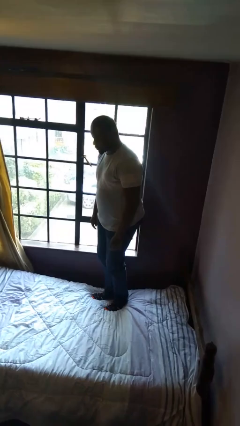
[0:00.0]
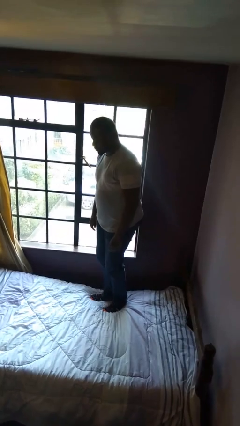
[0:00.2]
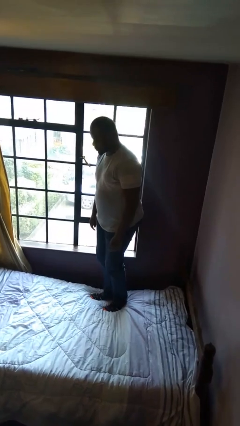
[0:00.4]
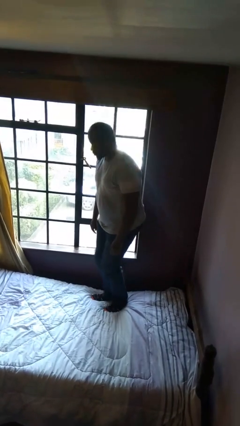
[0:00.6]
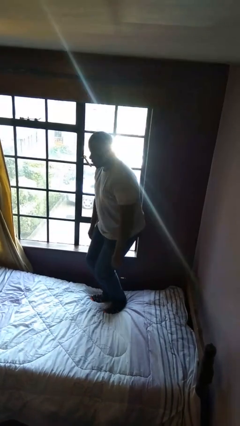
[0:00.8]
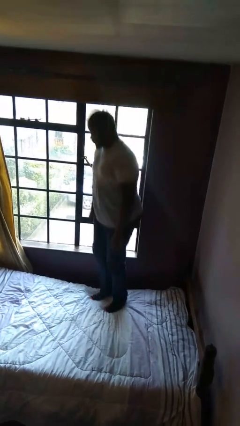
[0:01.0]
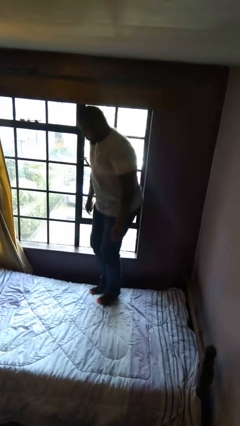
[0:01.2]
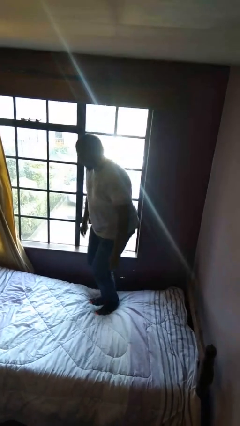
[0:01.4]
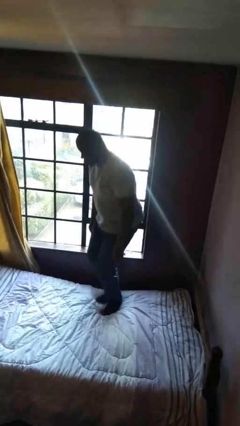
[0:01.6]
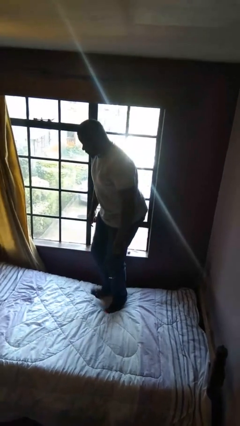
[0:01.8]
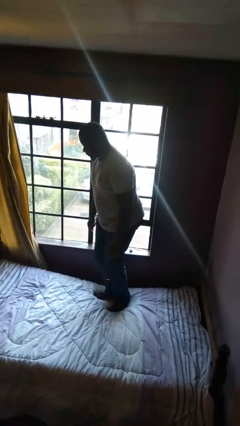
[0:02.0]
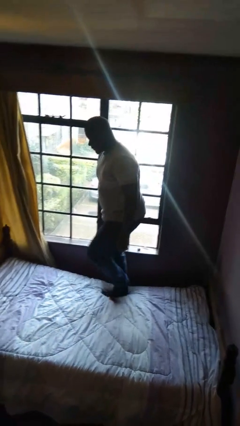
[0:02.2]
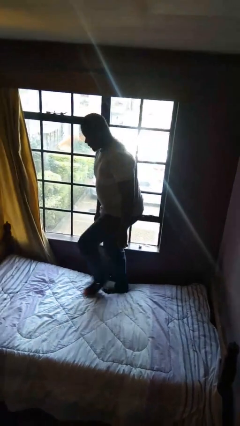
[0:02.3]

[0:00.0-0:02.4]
person jumps on bed

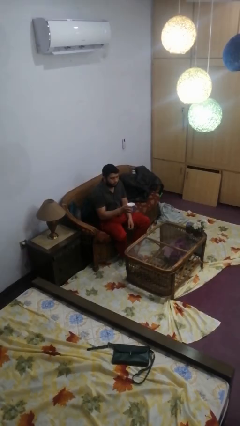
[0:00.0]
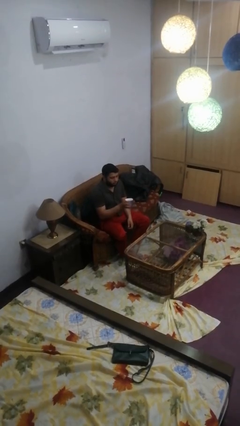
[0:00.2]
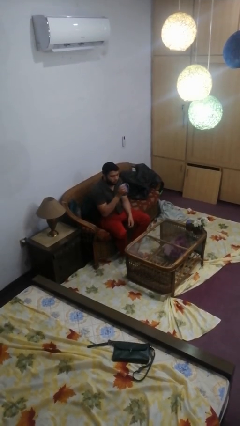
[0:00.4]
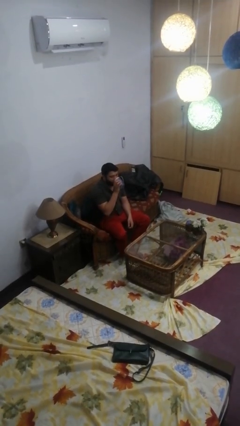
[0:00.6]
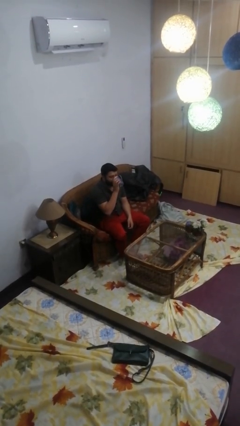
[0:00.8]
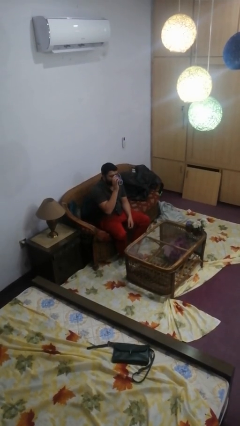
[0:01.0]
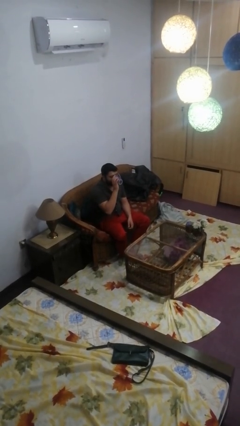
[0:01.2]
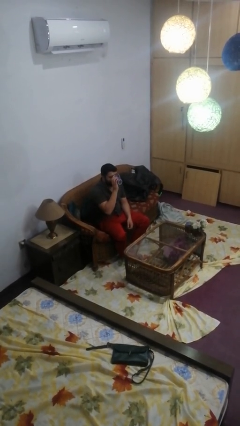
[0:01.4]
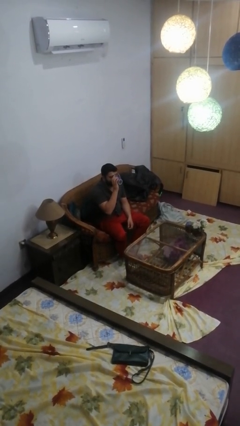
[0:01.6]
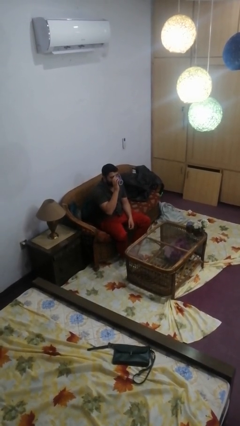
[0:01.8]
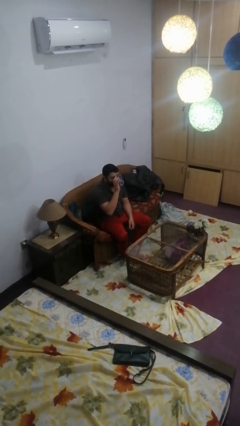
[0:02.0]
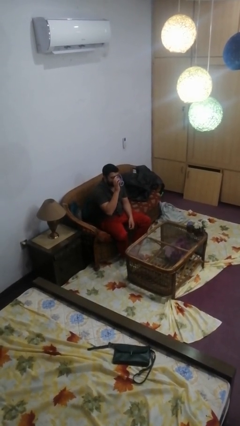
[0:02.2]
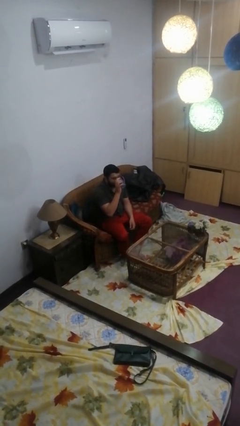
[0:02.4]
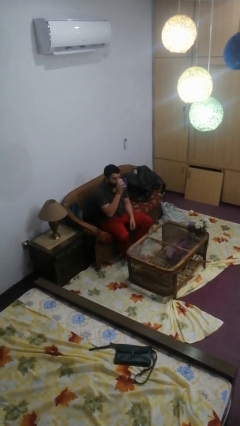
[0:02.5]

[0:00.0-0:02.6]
person drinks from mug

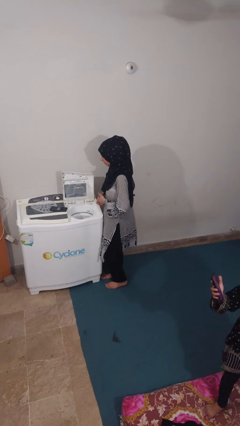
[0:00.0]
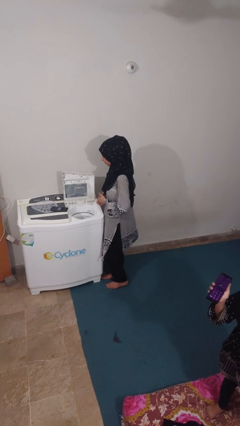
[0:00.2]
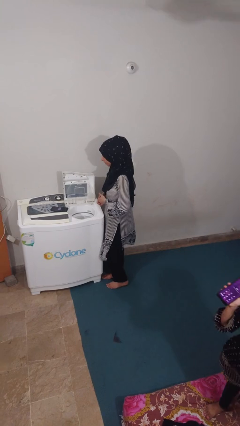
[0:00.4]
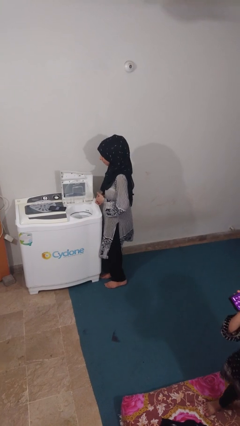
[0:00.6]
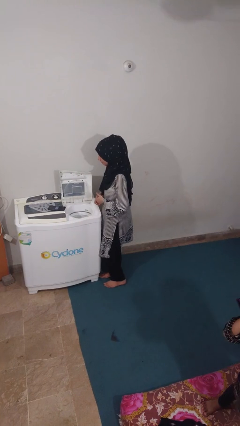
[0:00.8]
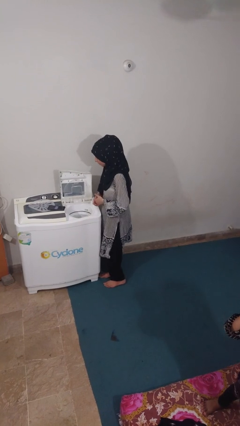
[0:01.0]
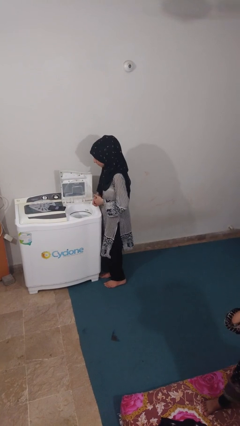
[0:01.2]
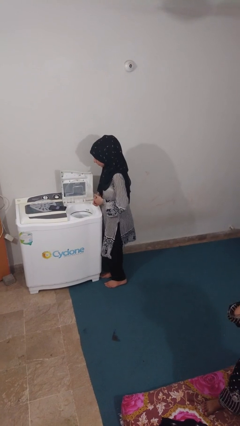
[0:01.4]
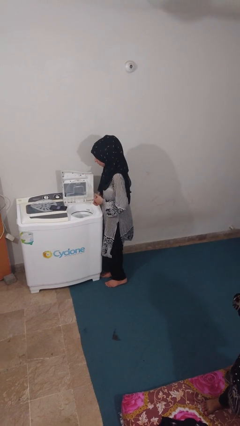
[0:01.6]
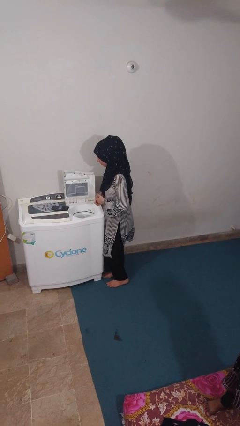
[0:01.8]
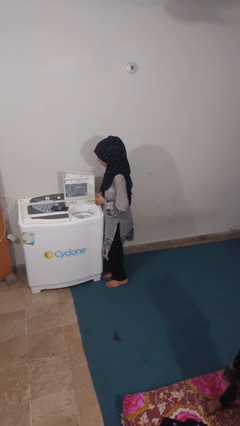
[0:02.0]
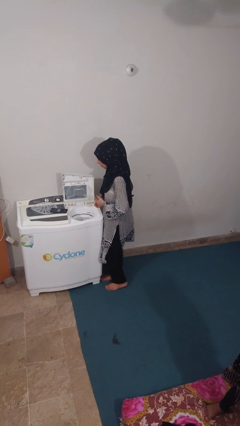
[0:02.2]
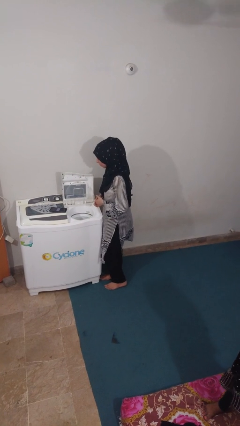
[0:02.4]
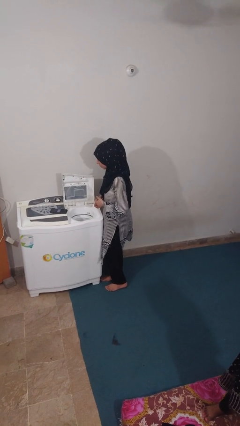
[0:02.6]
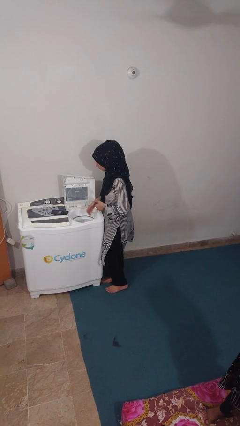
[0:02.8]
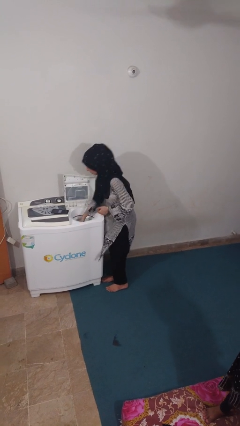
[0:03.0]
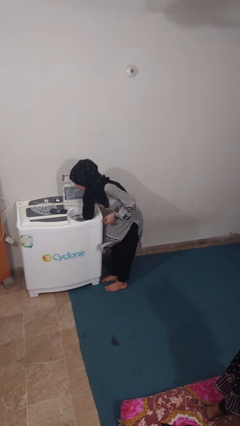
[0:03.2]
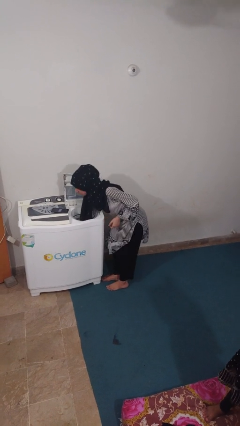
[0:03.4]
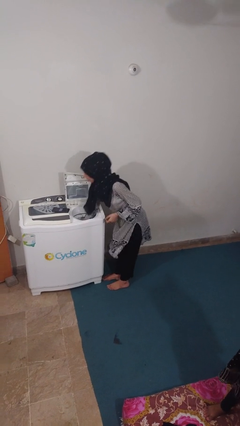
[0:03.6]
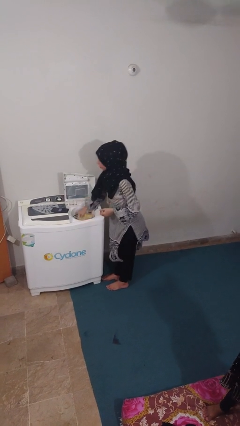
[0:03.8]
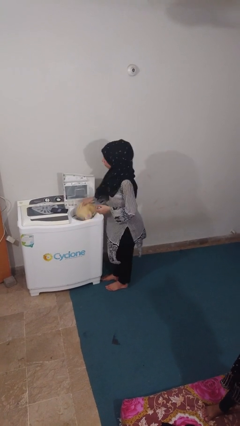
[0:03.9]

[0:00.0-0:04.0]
person unloads dryer

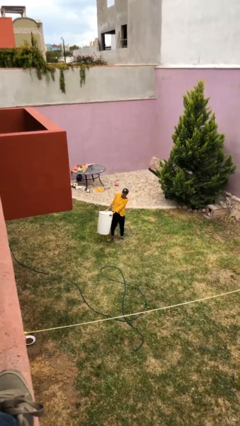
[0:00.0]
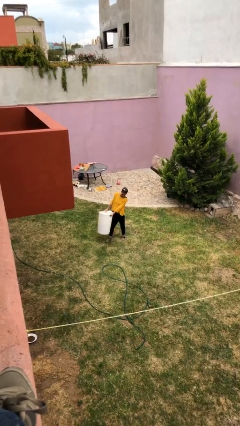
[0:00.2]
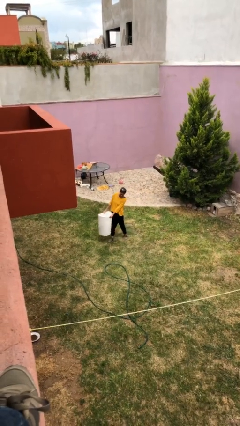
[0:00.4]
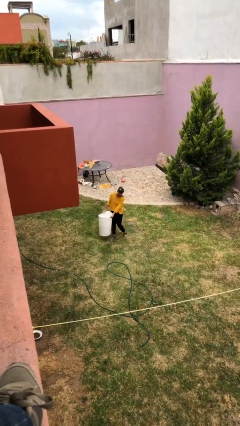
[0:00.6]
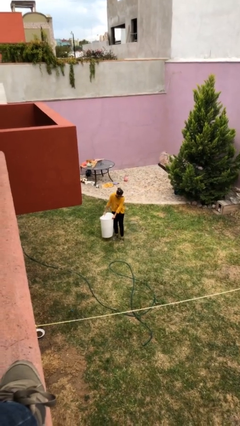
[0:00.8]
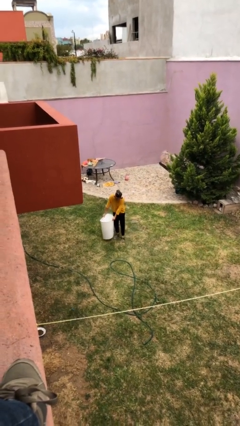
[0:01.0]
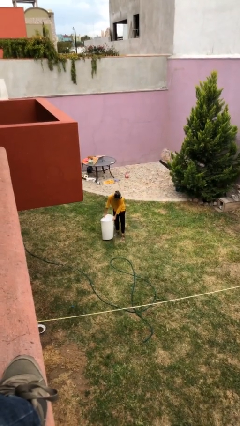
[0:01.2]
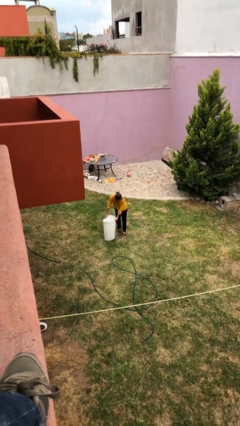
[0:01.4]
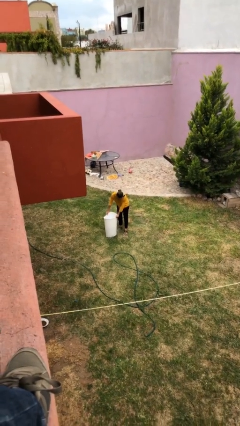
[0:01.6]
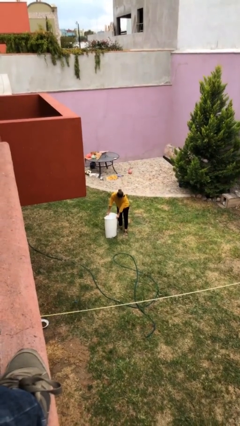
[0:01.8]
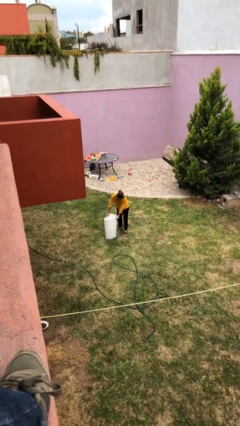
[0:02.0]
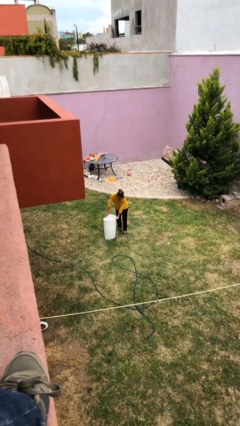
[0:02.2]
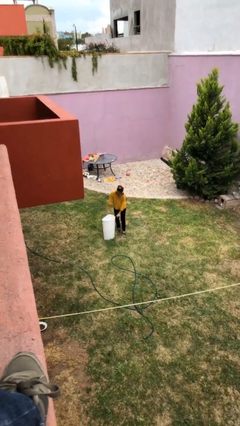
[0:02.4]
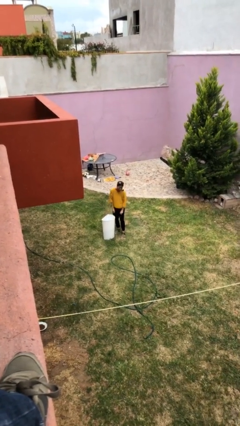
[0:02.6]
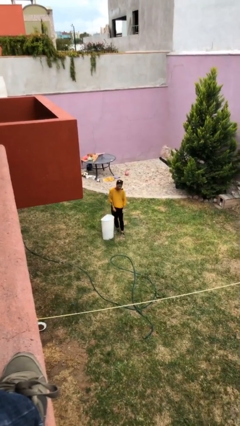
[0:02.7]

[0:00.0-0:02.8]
person puts down object on floor

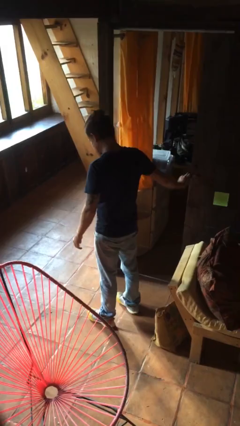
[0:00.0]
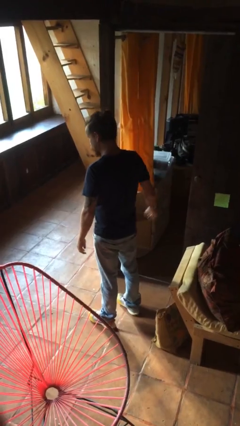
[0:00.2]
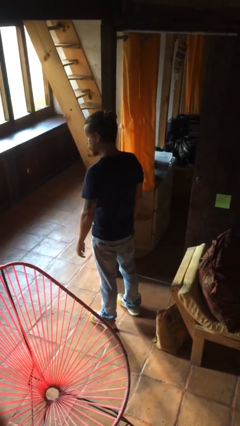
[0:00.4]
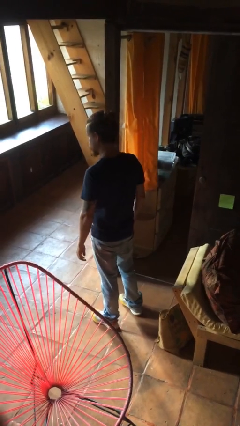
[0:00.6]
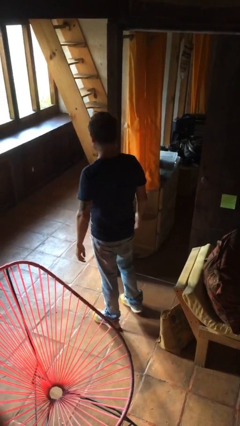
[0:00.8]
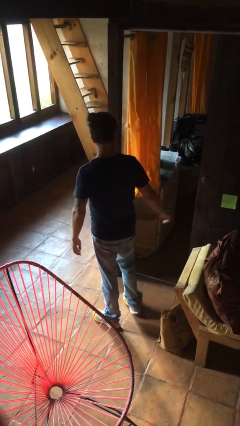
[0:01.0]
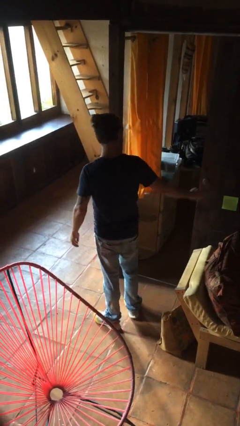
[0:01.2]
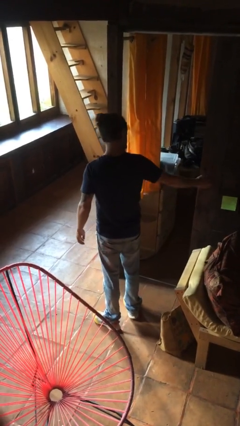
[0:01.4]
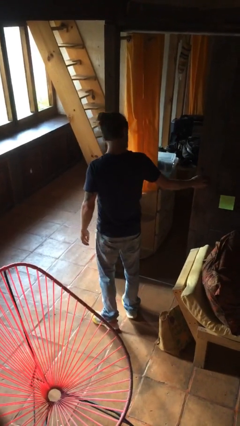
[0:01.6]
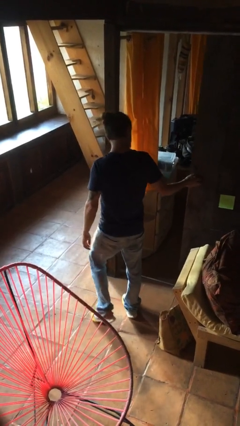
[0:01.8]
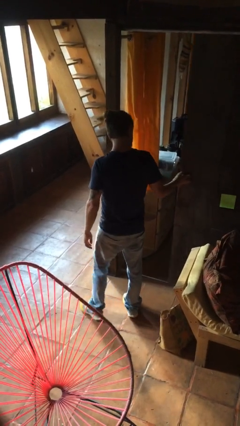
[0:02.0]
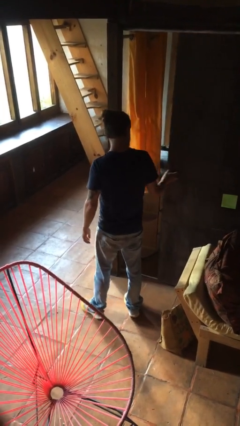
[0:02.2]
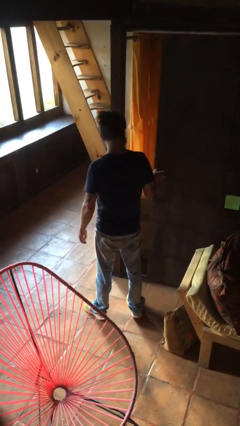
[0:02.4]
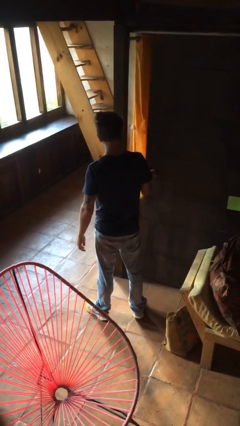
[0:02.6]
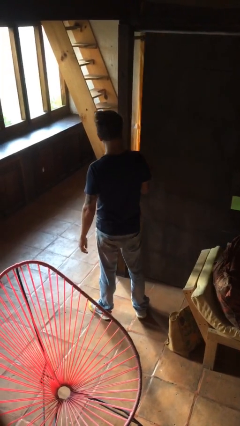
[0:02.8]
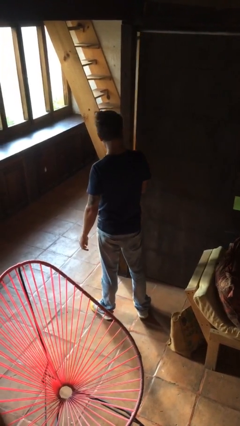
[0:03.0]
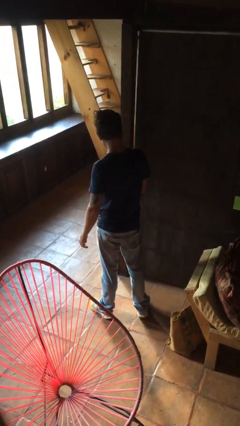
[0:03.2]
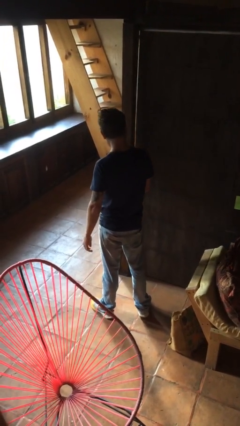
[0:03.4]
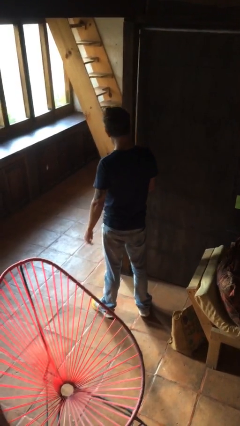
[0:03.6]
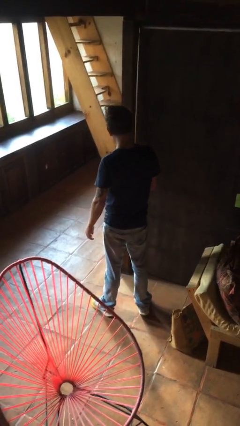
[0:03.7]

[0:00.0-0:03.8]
person closes sliding door

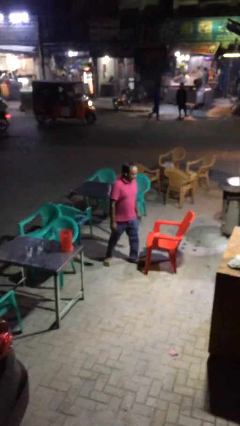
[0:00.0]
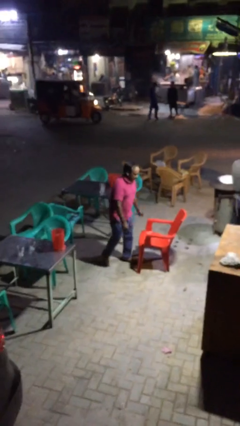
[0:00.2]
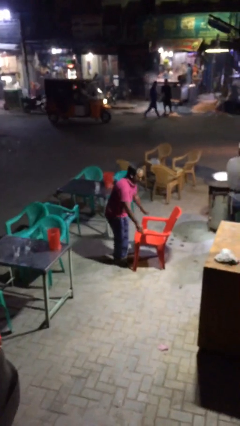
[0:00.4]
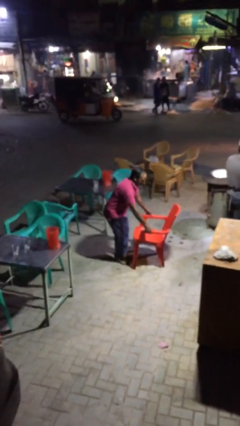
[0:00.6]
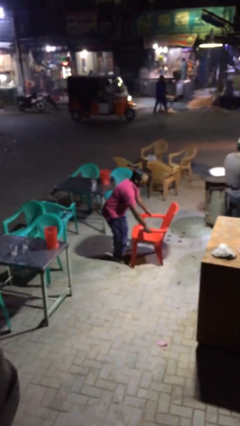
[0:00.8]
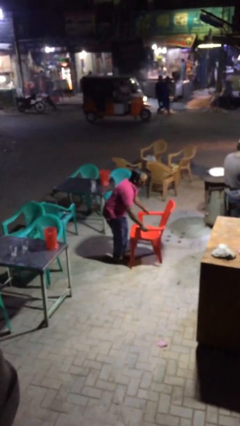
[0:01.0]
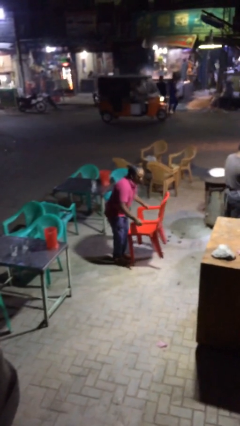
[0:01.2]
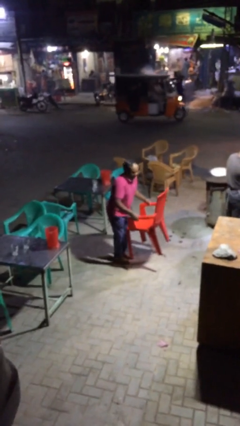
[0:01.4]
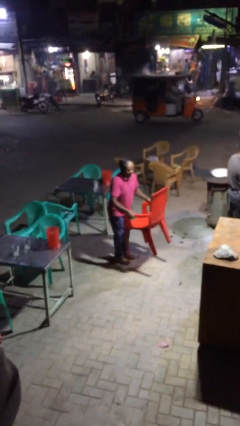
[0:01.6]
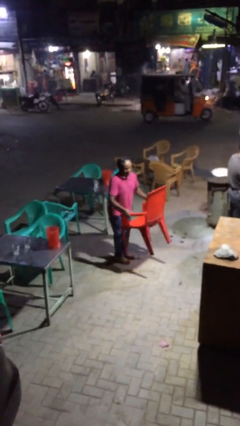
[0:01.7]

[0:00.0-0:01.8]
person picks up object from floor

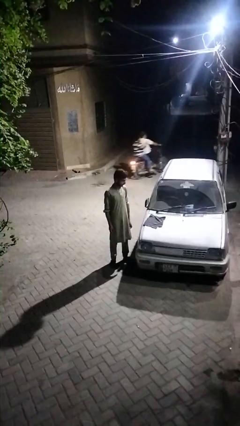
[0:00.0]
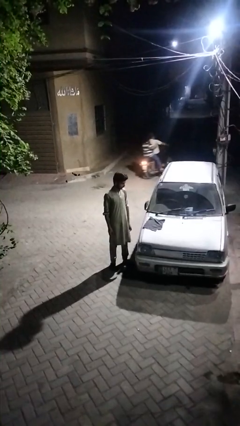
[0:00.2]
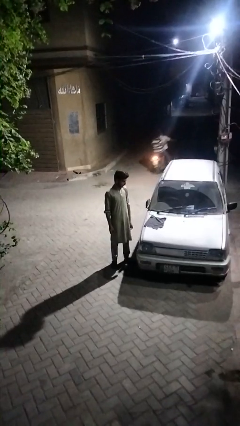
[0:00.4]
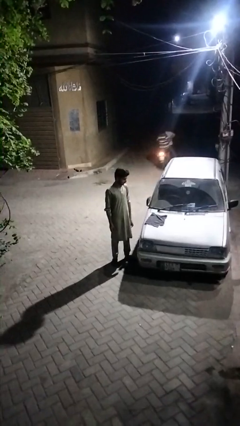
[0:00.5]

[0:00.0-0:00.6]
person polishes car with rag
